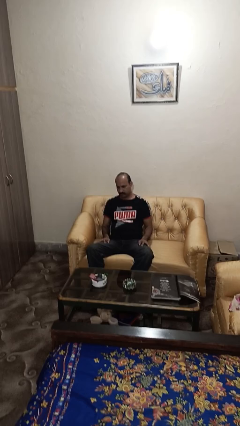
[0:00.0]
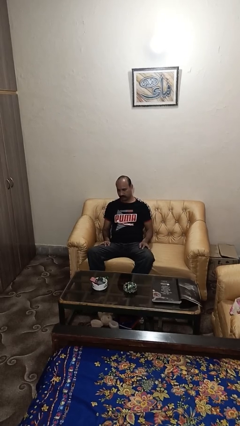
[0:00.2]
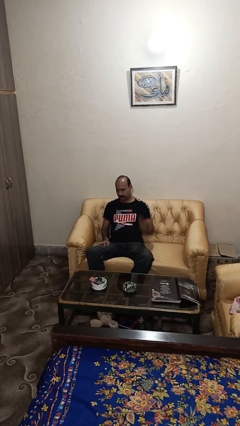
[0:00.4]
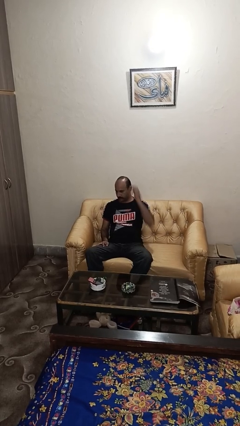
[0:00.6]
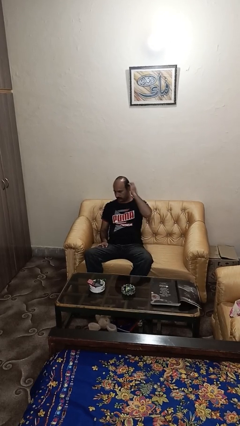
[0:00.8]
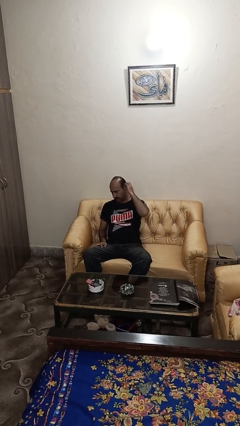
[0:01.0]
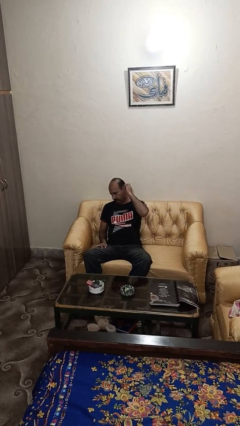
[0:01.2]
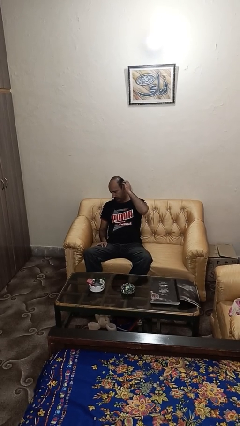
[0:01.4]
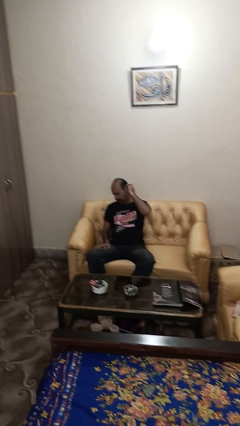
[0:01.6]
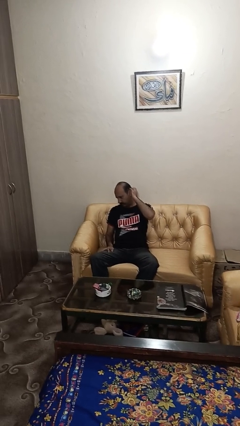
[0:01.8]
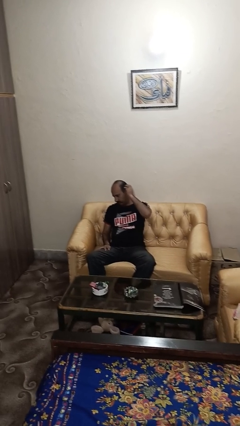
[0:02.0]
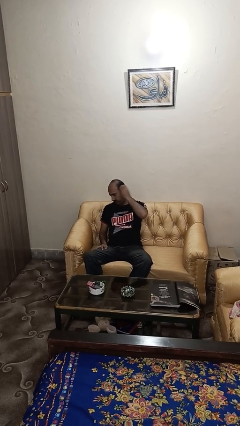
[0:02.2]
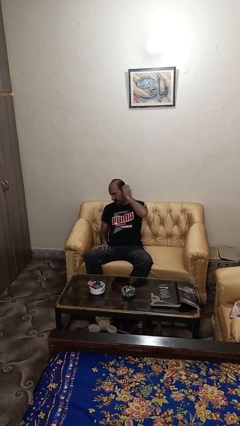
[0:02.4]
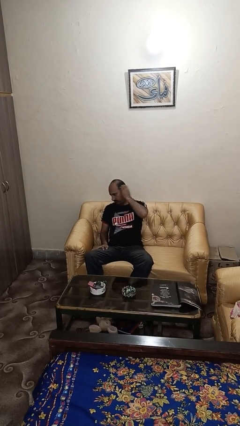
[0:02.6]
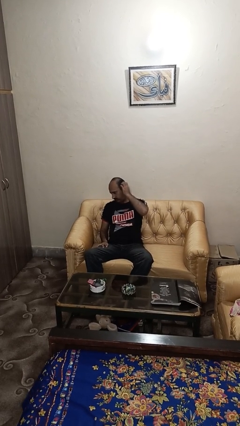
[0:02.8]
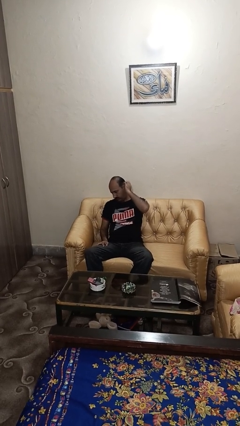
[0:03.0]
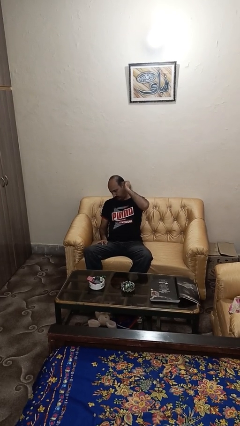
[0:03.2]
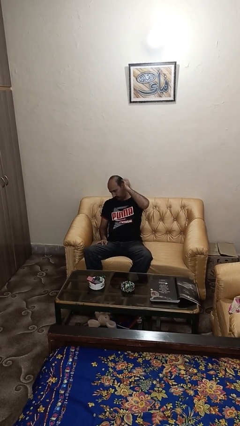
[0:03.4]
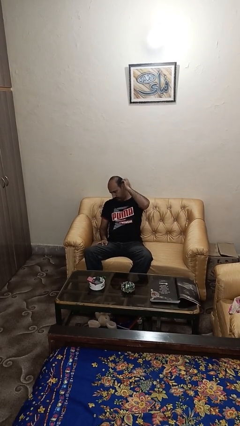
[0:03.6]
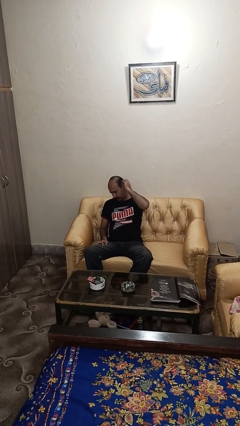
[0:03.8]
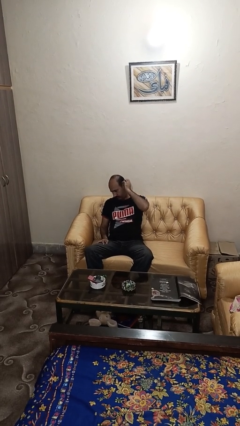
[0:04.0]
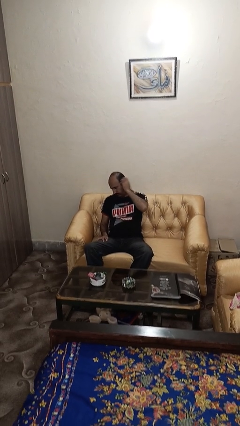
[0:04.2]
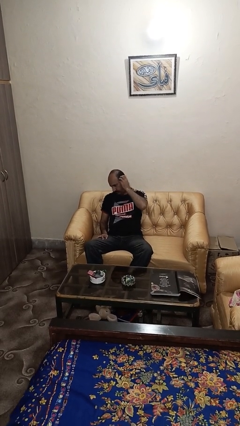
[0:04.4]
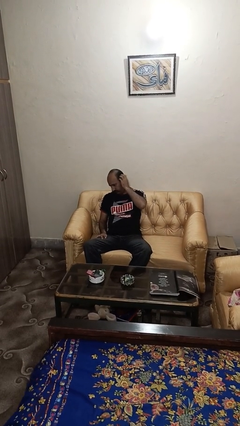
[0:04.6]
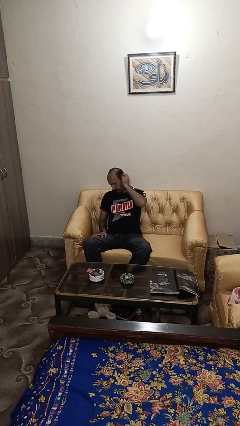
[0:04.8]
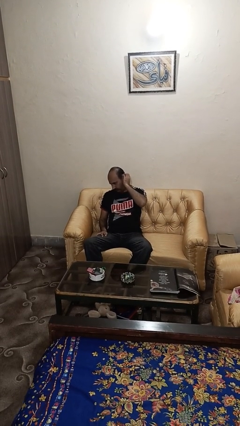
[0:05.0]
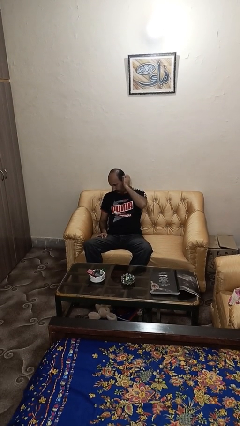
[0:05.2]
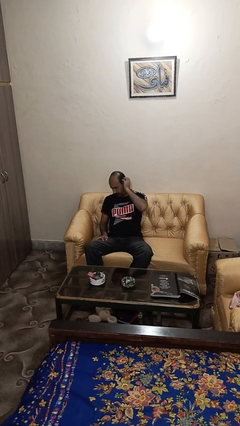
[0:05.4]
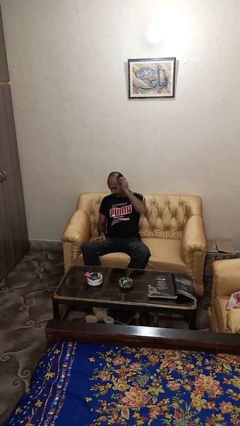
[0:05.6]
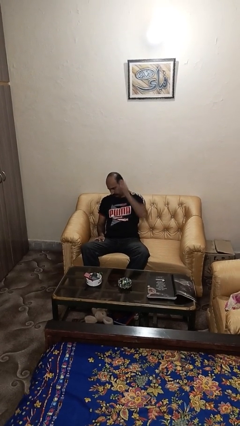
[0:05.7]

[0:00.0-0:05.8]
person strokes hair

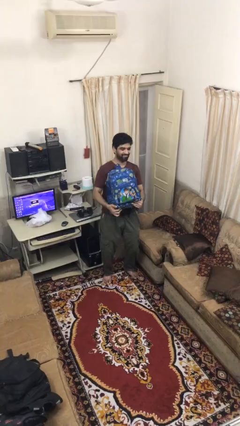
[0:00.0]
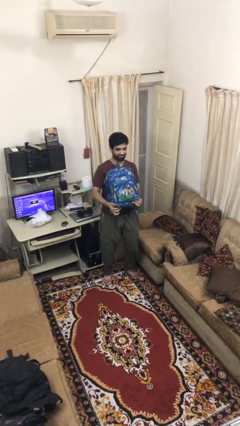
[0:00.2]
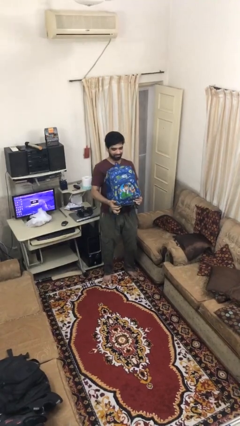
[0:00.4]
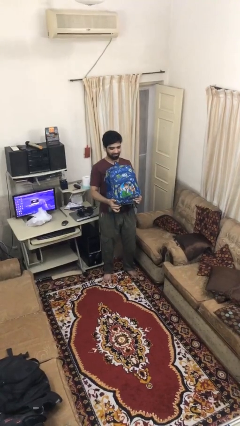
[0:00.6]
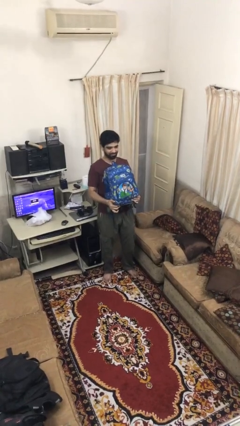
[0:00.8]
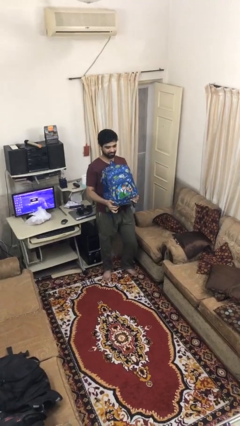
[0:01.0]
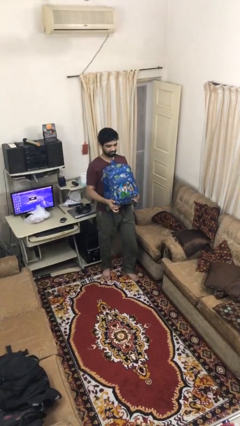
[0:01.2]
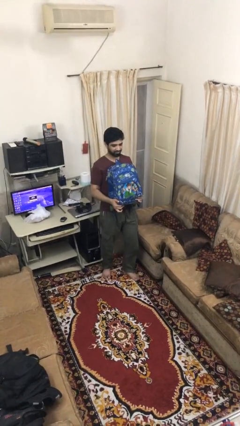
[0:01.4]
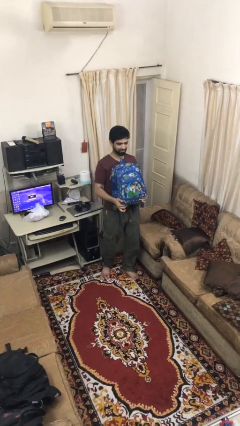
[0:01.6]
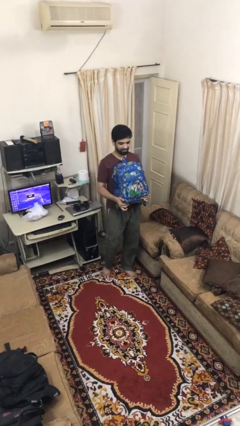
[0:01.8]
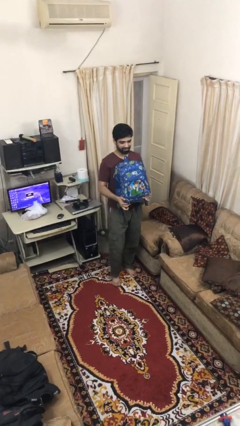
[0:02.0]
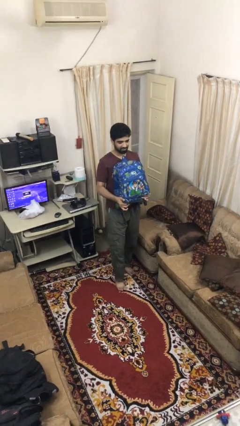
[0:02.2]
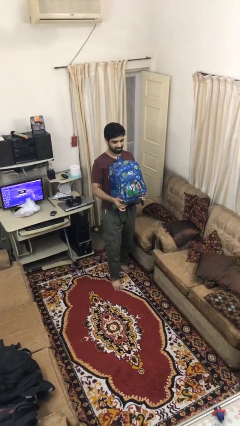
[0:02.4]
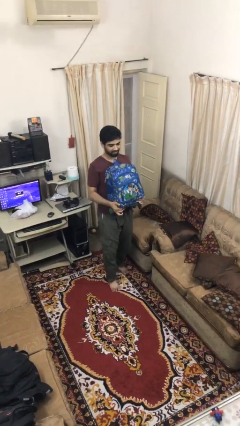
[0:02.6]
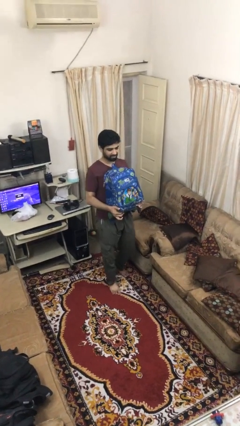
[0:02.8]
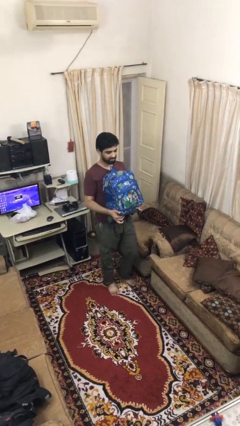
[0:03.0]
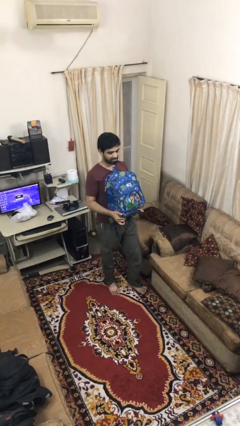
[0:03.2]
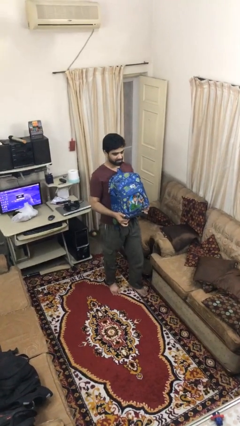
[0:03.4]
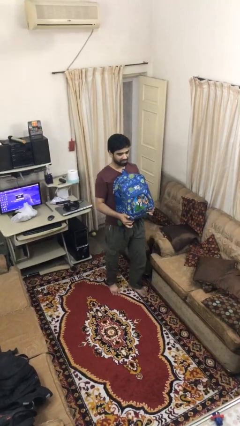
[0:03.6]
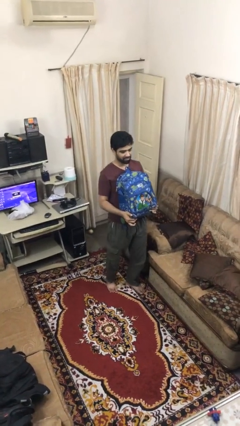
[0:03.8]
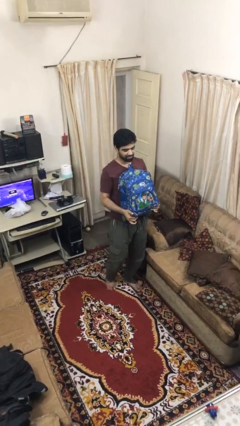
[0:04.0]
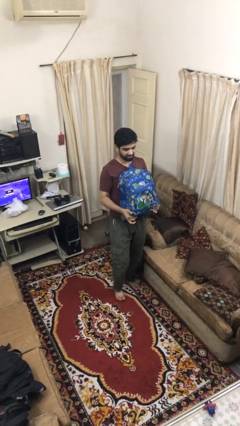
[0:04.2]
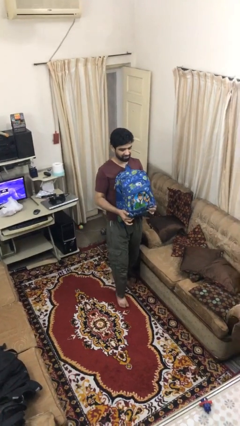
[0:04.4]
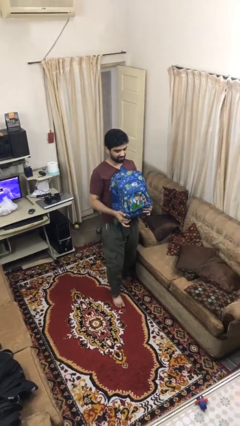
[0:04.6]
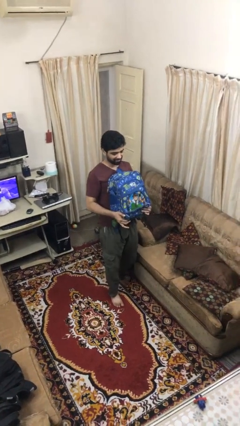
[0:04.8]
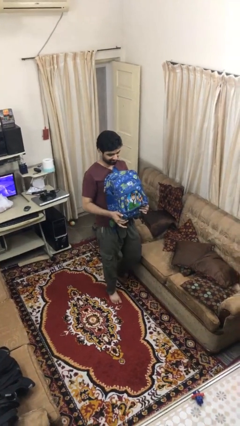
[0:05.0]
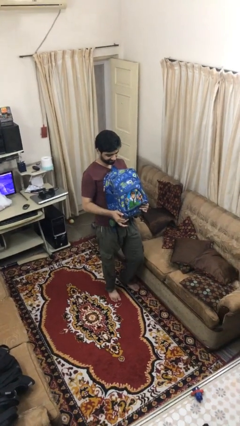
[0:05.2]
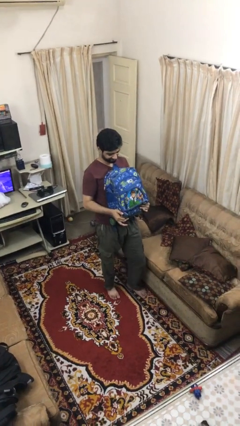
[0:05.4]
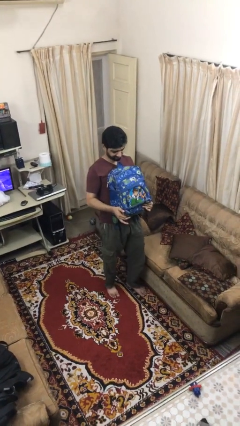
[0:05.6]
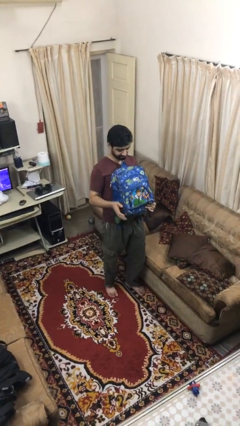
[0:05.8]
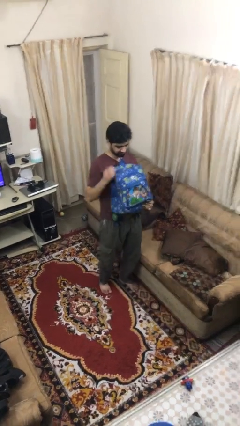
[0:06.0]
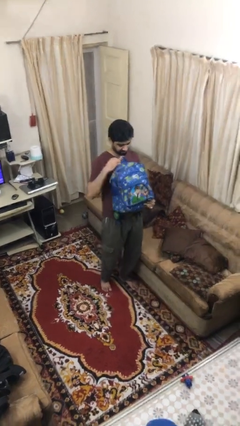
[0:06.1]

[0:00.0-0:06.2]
person carries heavy object

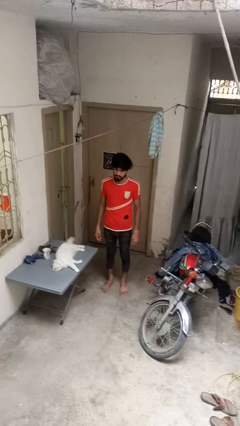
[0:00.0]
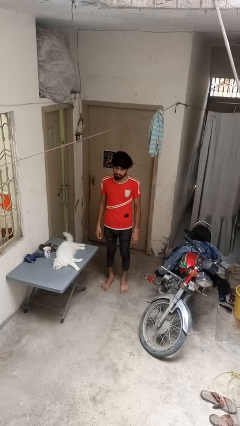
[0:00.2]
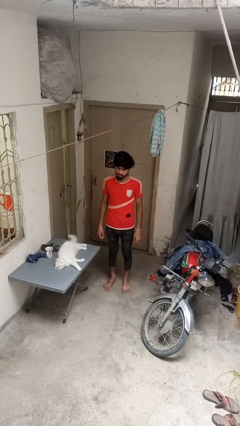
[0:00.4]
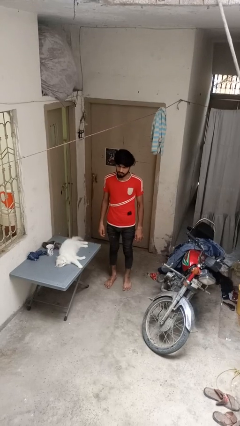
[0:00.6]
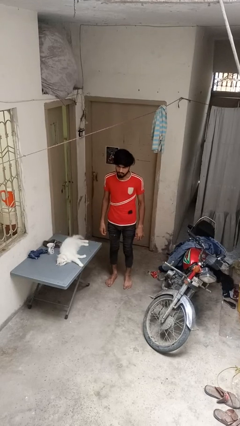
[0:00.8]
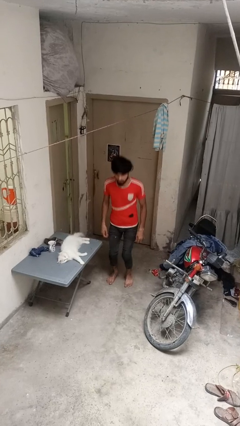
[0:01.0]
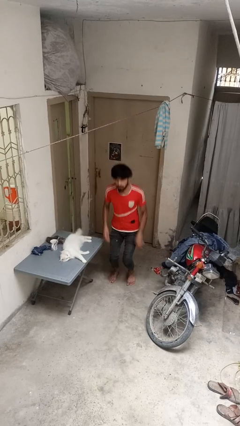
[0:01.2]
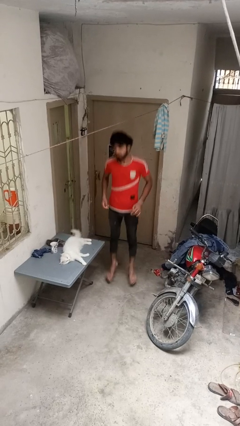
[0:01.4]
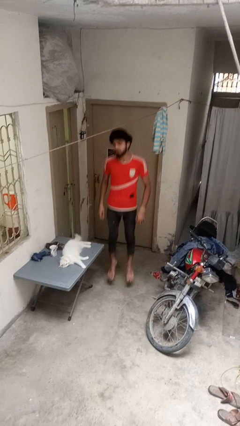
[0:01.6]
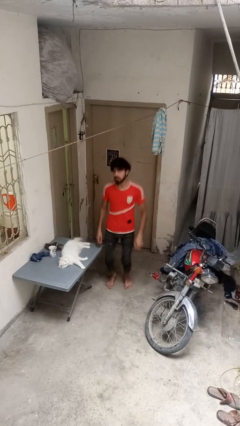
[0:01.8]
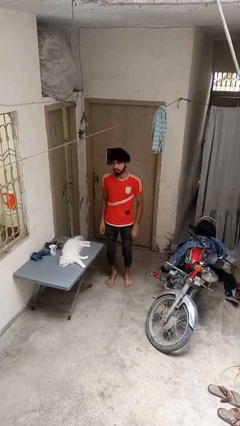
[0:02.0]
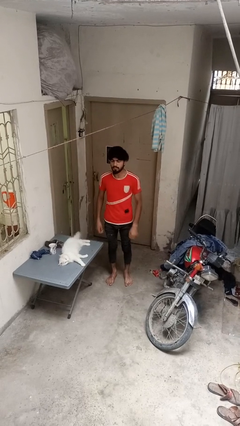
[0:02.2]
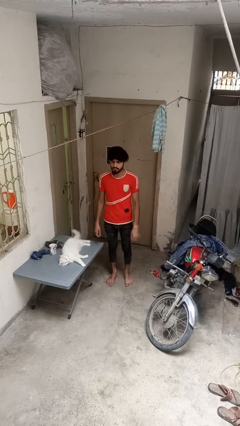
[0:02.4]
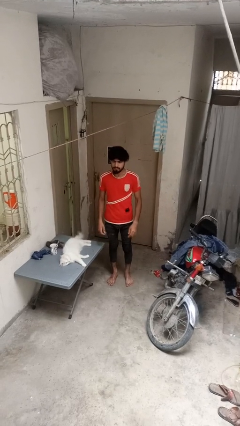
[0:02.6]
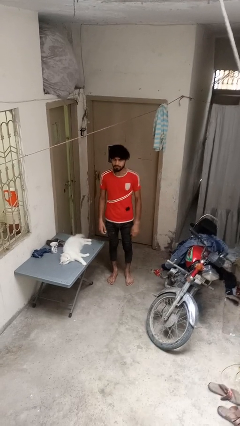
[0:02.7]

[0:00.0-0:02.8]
person jumps

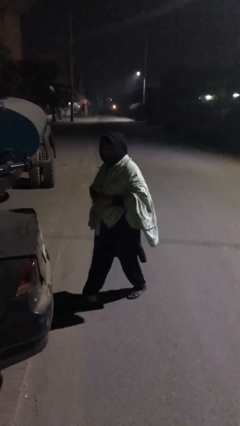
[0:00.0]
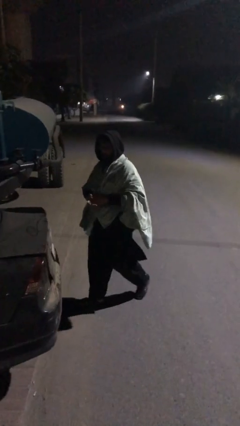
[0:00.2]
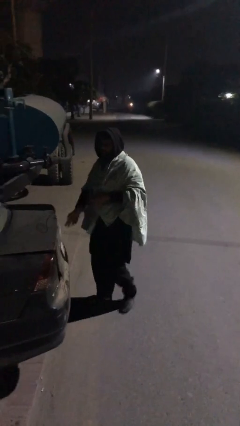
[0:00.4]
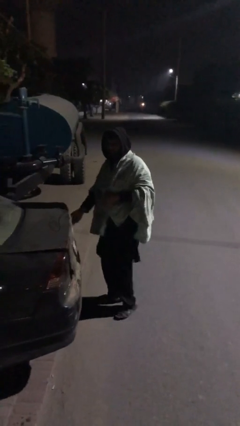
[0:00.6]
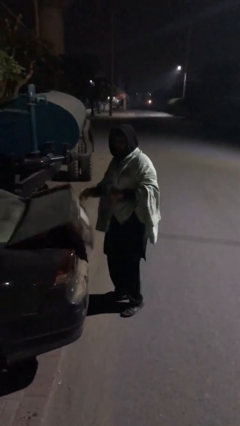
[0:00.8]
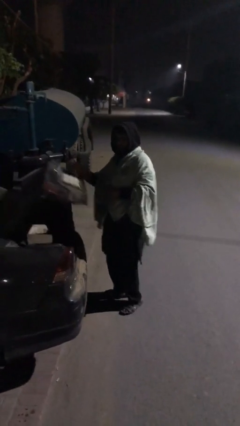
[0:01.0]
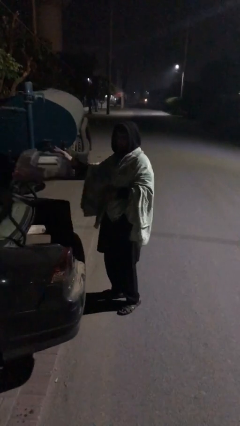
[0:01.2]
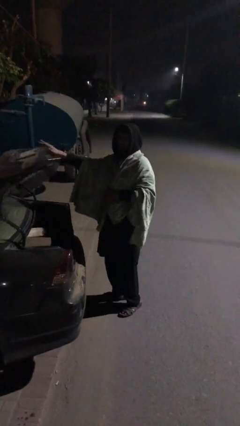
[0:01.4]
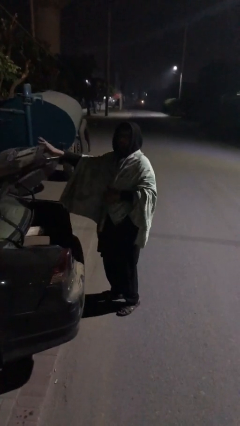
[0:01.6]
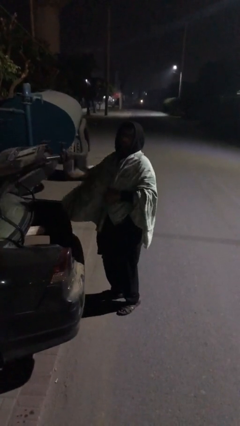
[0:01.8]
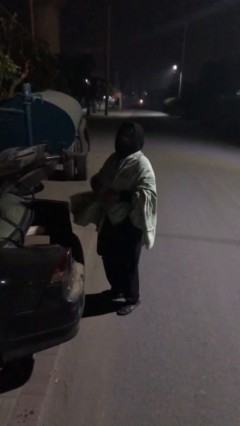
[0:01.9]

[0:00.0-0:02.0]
person opens car trunk

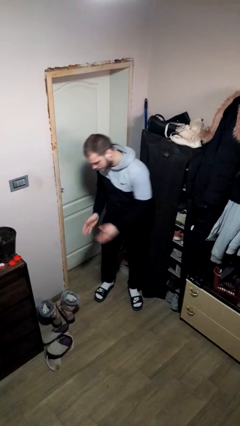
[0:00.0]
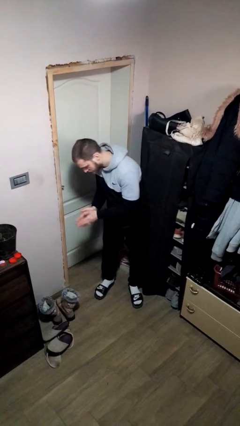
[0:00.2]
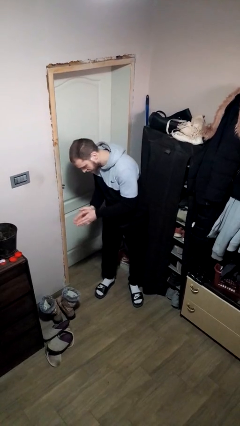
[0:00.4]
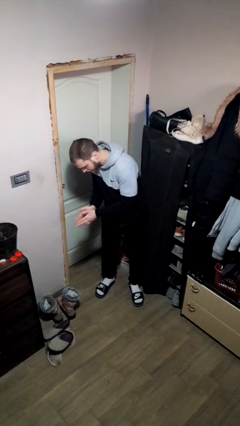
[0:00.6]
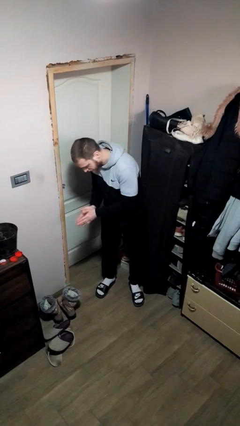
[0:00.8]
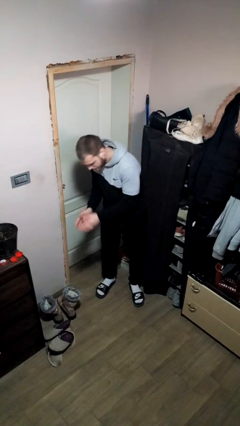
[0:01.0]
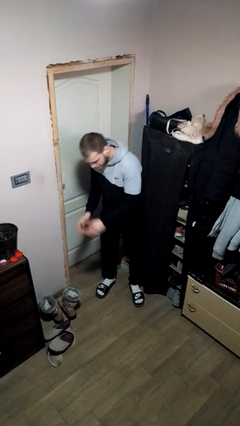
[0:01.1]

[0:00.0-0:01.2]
person claps hands
